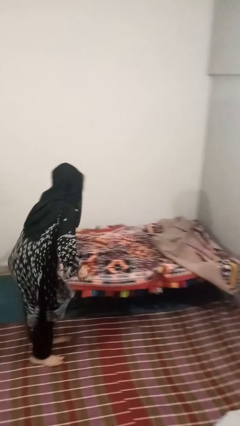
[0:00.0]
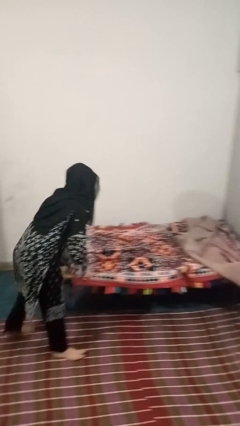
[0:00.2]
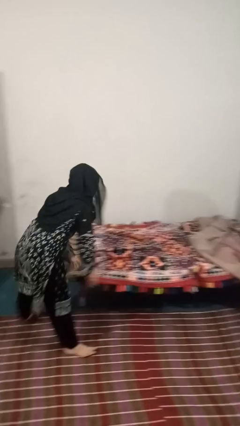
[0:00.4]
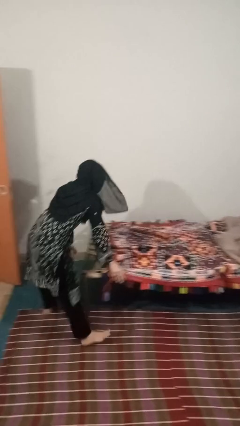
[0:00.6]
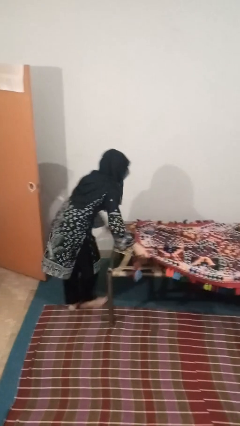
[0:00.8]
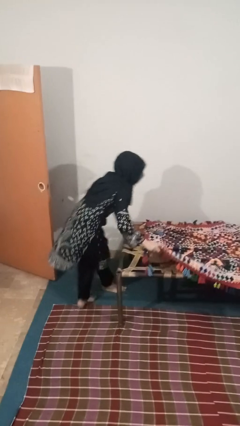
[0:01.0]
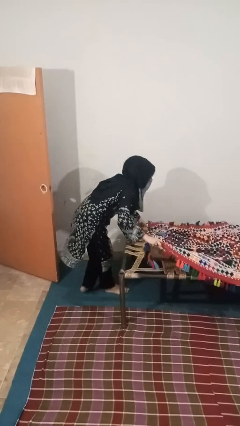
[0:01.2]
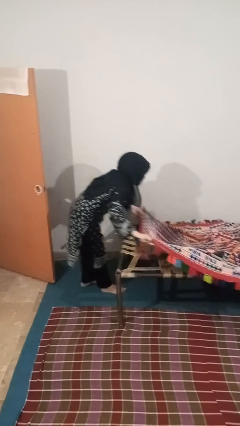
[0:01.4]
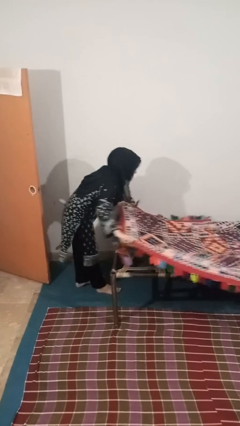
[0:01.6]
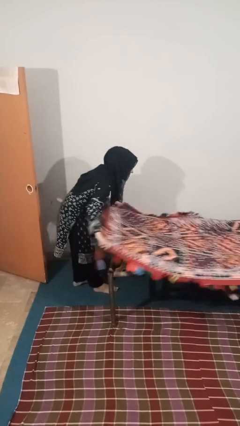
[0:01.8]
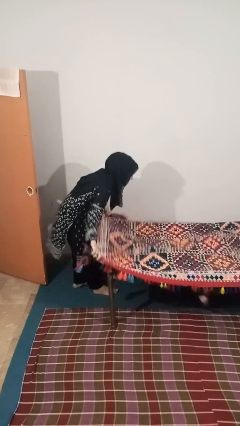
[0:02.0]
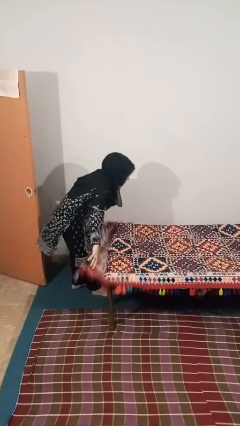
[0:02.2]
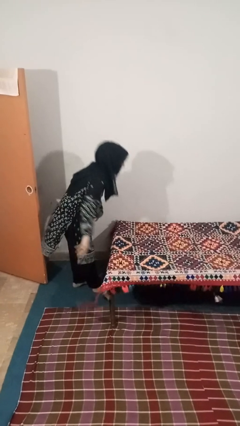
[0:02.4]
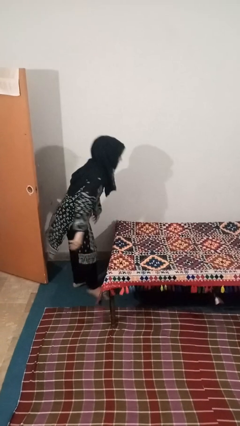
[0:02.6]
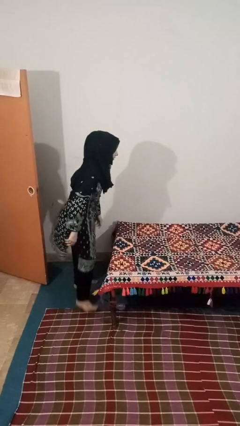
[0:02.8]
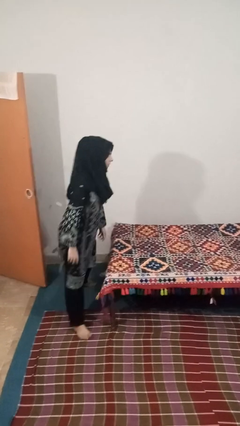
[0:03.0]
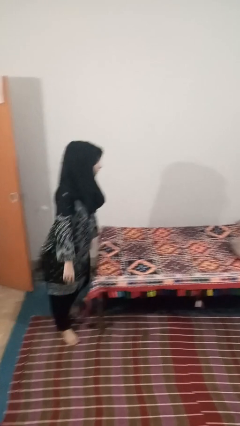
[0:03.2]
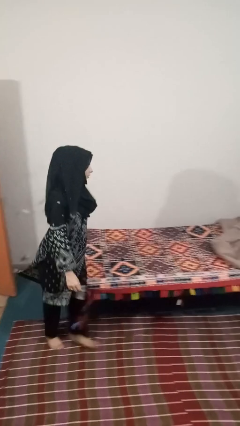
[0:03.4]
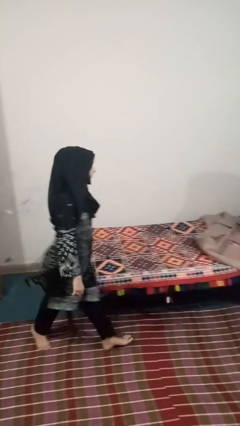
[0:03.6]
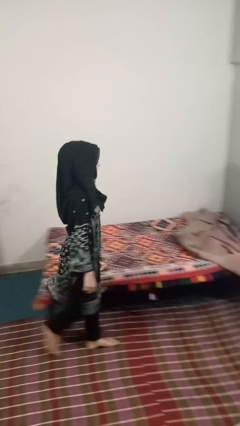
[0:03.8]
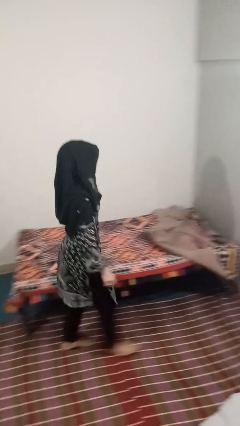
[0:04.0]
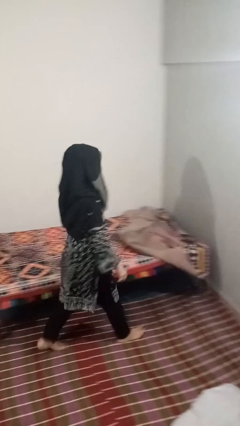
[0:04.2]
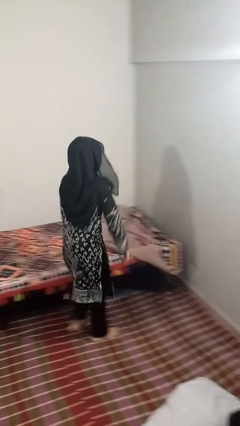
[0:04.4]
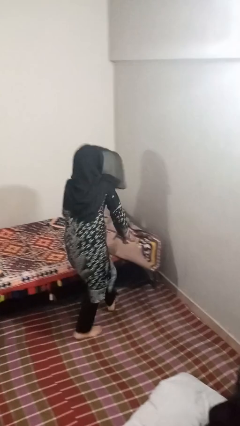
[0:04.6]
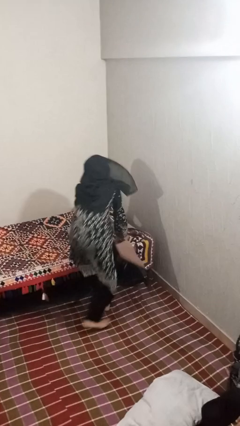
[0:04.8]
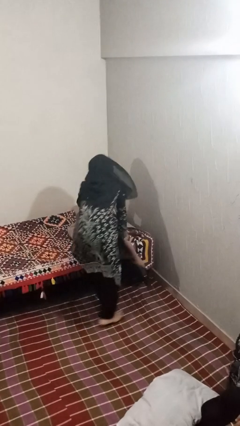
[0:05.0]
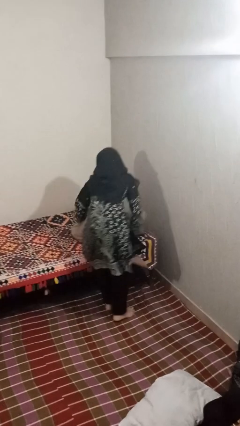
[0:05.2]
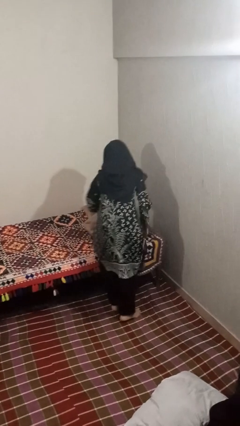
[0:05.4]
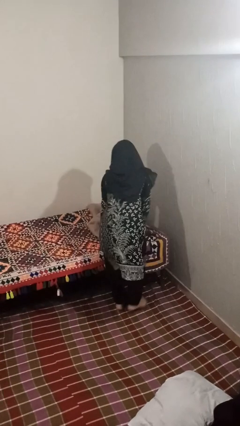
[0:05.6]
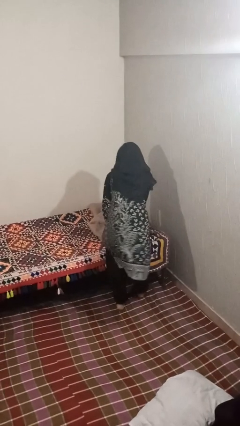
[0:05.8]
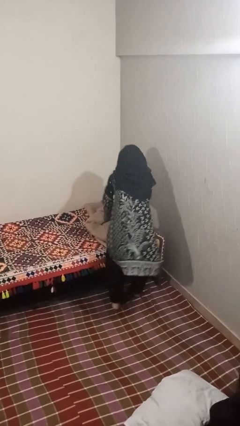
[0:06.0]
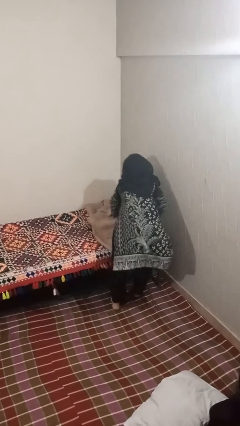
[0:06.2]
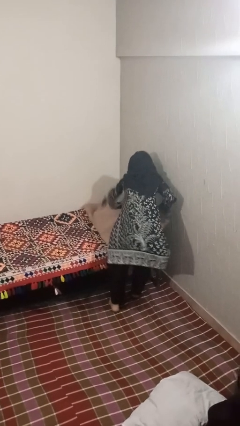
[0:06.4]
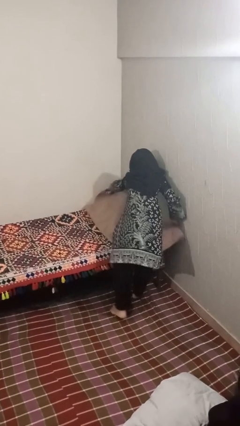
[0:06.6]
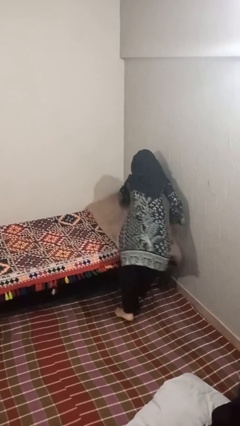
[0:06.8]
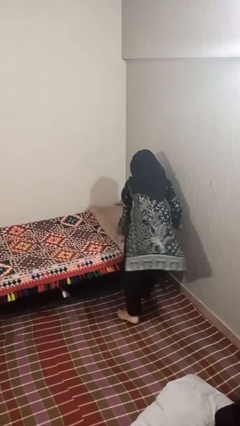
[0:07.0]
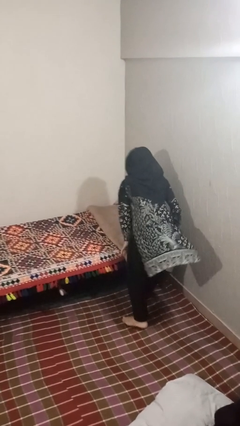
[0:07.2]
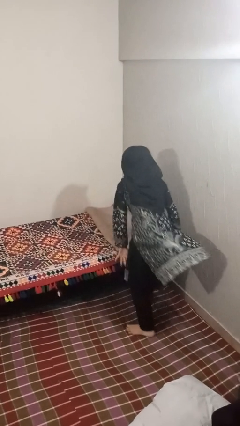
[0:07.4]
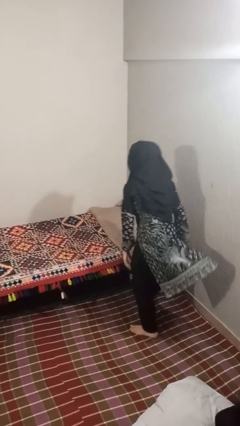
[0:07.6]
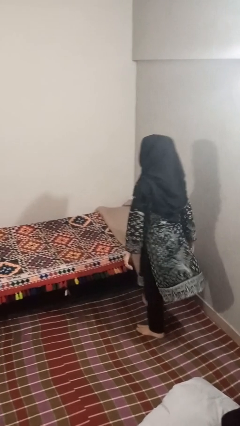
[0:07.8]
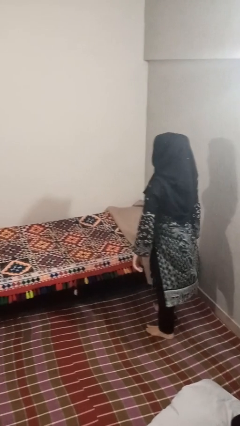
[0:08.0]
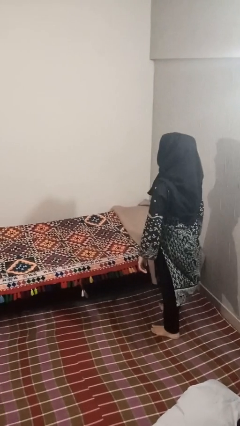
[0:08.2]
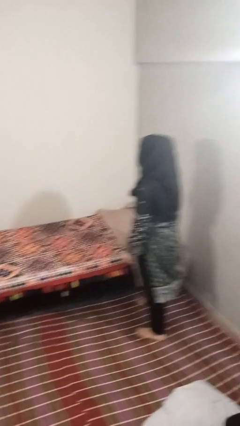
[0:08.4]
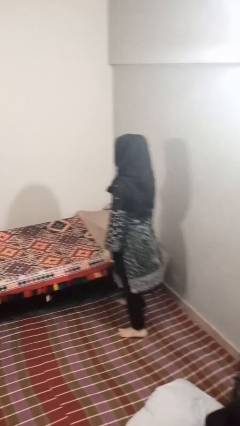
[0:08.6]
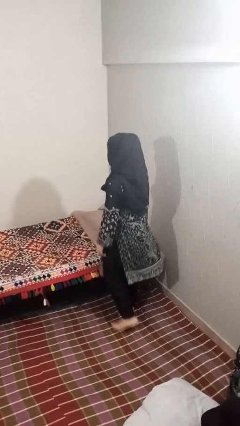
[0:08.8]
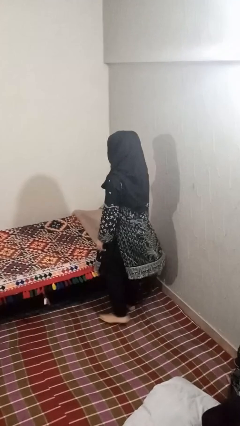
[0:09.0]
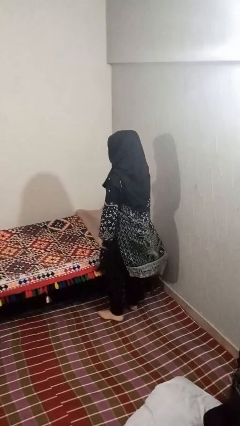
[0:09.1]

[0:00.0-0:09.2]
person makes bed

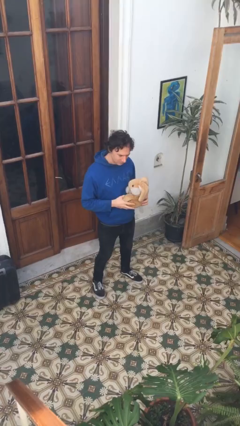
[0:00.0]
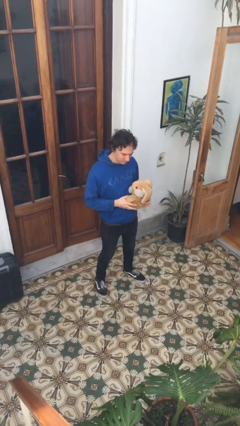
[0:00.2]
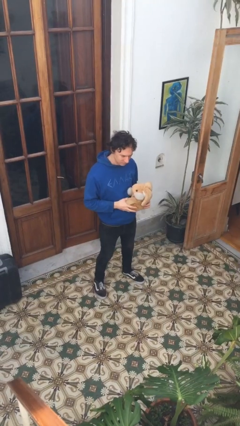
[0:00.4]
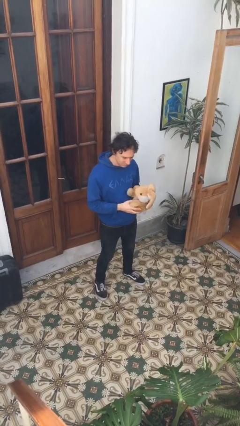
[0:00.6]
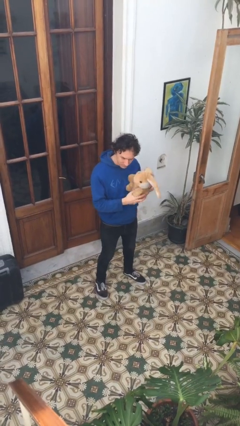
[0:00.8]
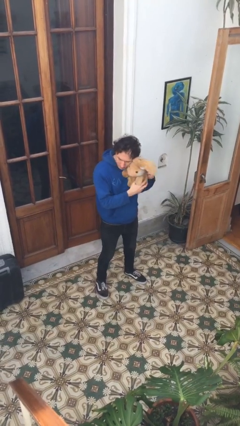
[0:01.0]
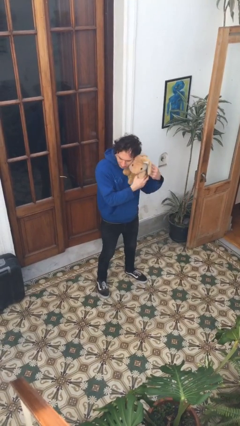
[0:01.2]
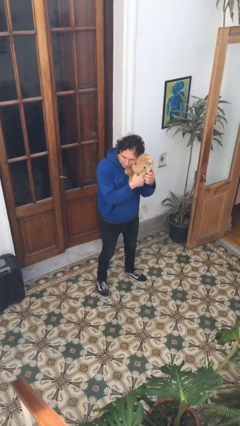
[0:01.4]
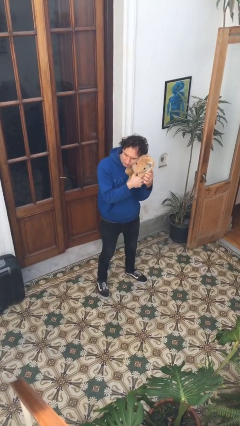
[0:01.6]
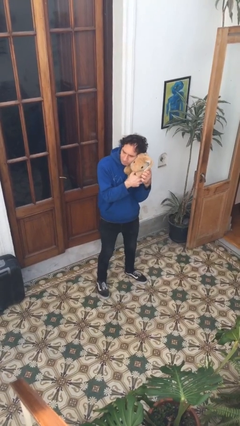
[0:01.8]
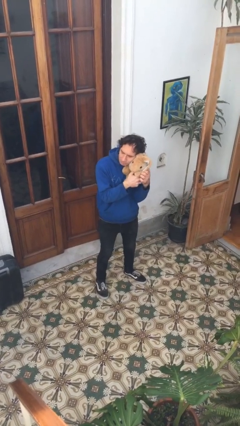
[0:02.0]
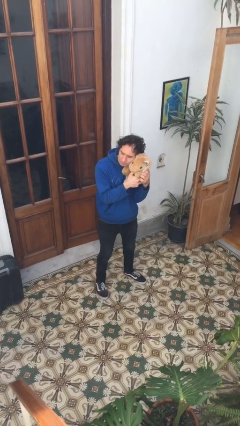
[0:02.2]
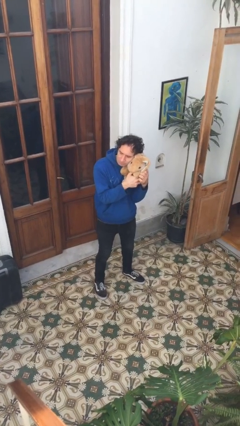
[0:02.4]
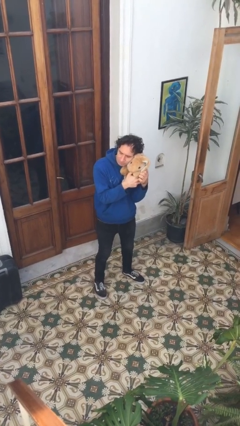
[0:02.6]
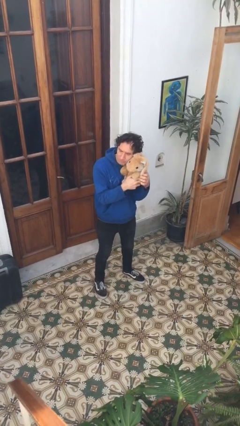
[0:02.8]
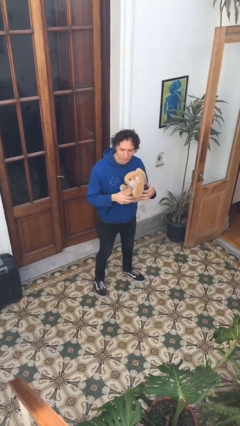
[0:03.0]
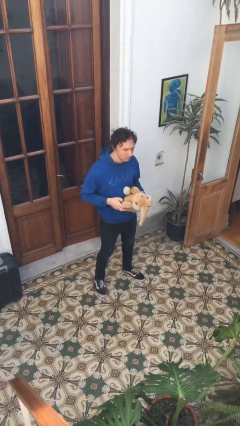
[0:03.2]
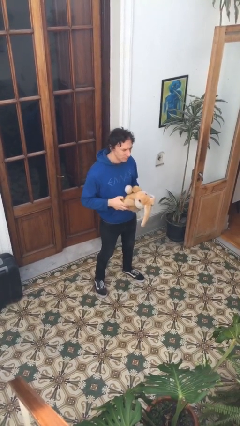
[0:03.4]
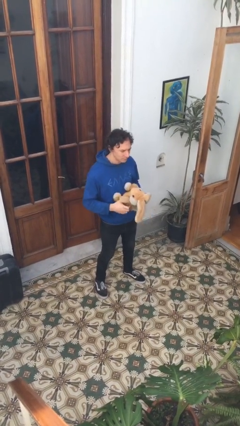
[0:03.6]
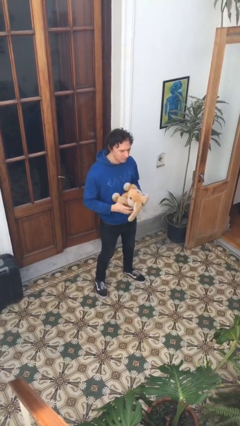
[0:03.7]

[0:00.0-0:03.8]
person hugs stuffed animal

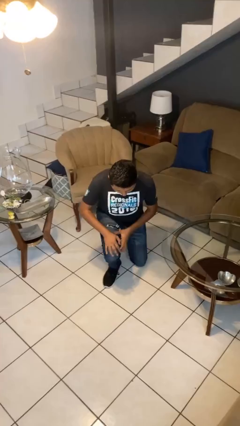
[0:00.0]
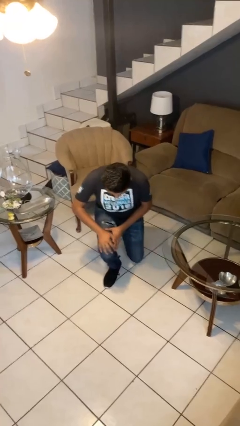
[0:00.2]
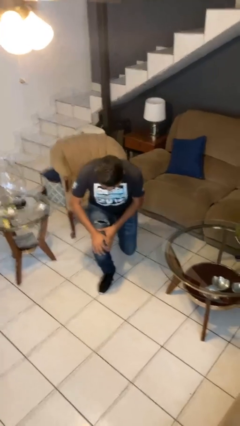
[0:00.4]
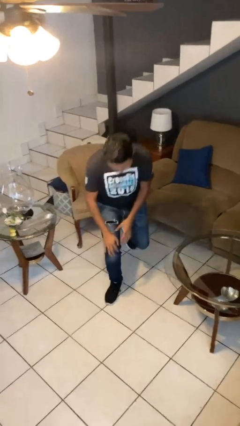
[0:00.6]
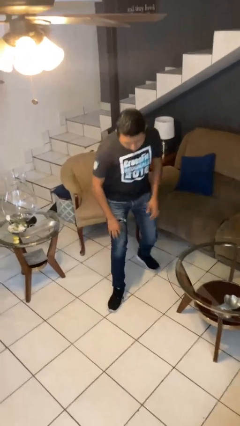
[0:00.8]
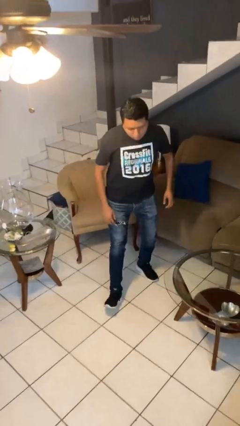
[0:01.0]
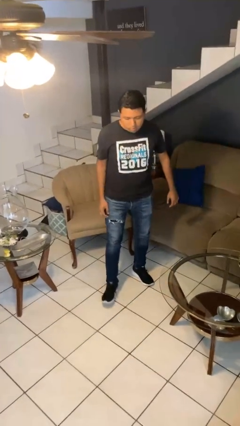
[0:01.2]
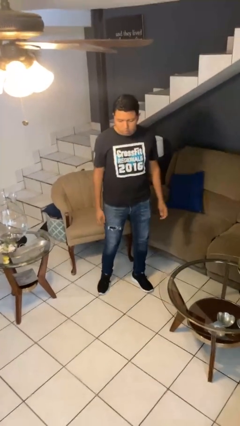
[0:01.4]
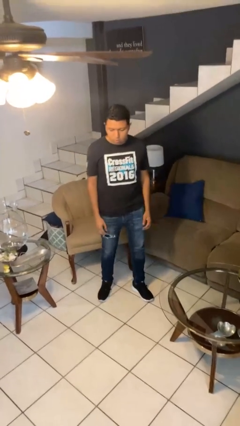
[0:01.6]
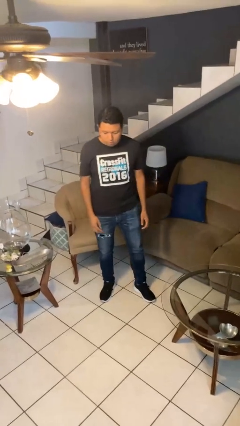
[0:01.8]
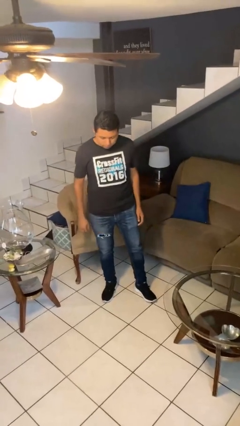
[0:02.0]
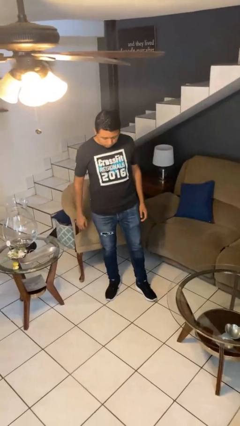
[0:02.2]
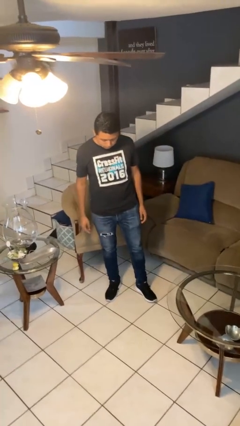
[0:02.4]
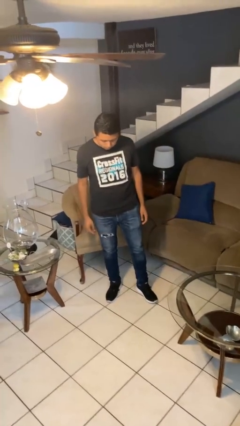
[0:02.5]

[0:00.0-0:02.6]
person stands up from floor

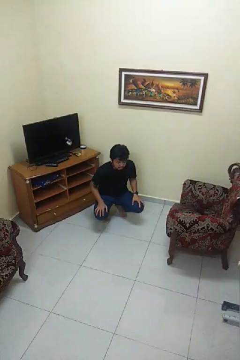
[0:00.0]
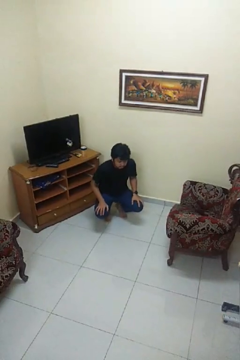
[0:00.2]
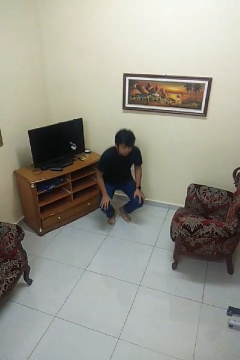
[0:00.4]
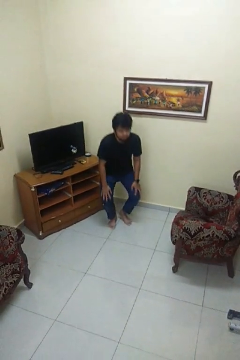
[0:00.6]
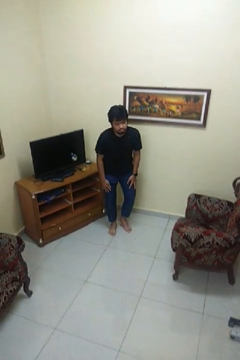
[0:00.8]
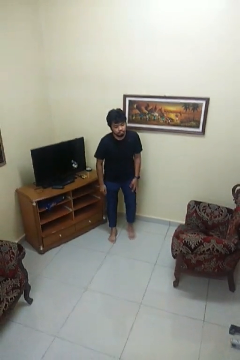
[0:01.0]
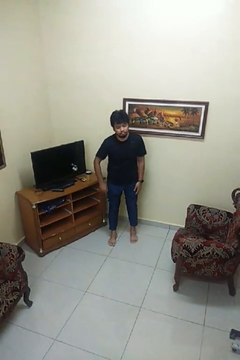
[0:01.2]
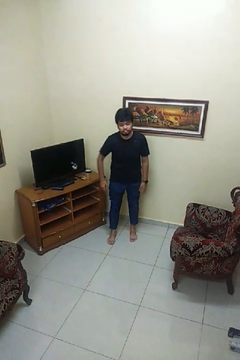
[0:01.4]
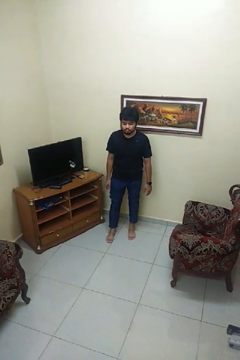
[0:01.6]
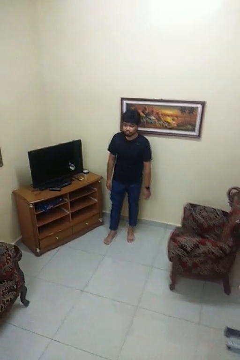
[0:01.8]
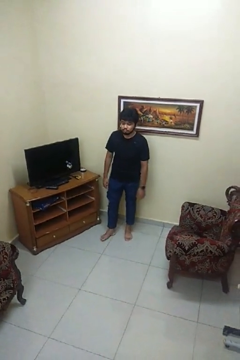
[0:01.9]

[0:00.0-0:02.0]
person stands up

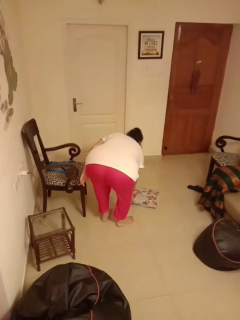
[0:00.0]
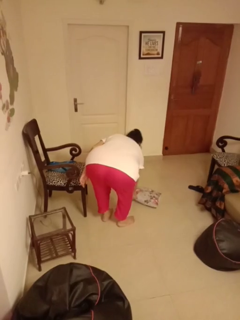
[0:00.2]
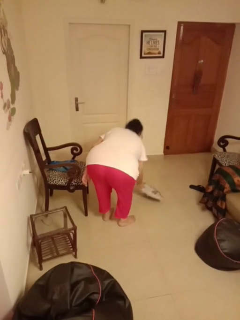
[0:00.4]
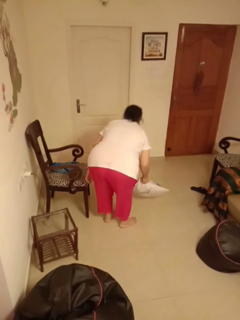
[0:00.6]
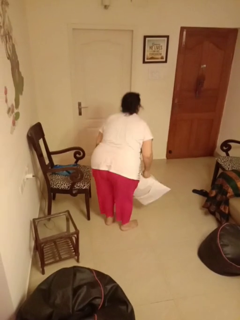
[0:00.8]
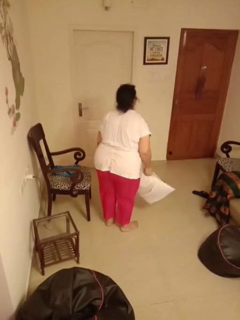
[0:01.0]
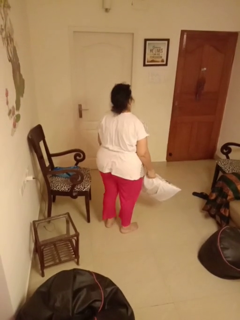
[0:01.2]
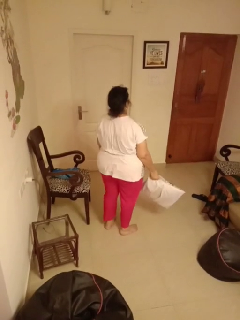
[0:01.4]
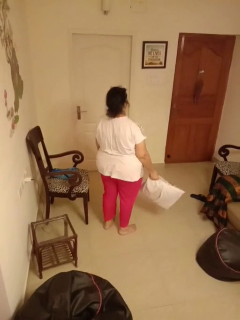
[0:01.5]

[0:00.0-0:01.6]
person picks up object from floor
